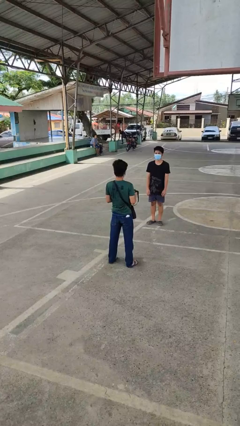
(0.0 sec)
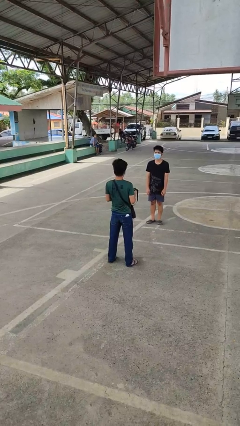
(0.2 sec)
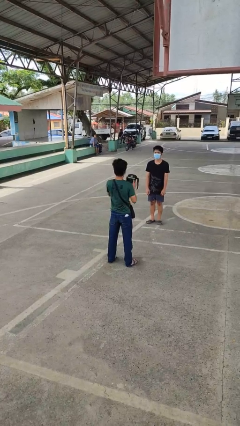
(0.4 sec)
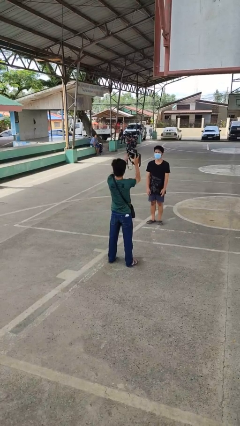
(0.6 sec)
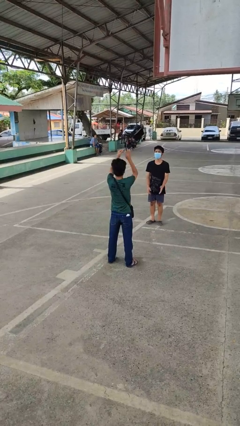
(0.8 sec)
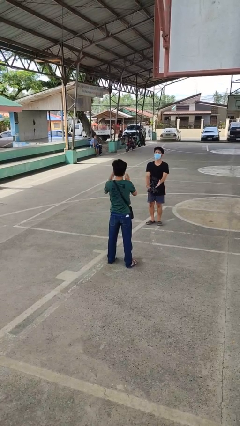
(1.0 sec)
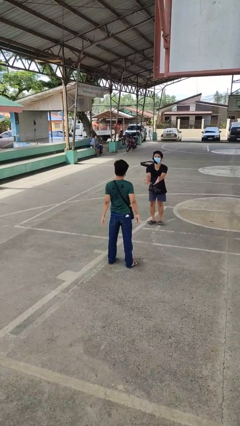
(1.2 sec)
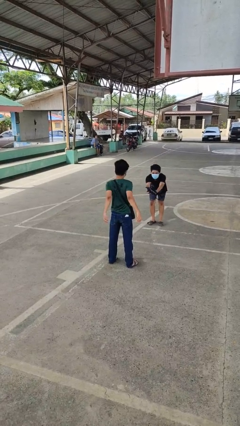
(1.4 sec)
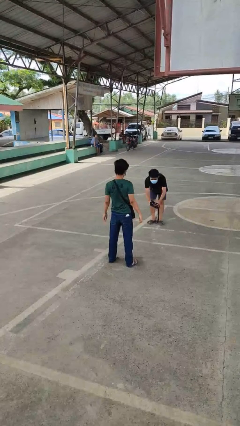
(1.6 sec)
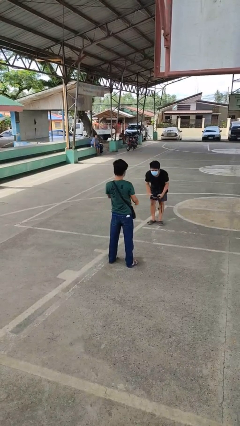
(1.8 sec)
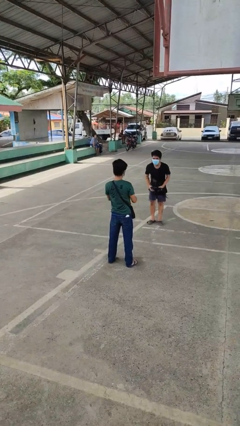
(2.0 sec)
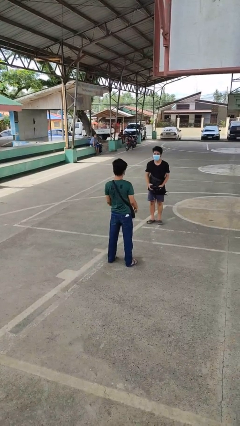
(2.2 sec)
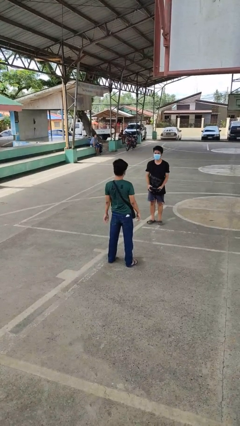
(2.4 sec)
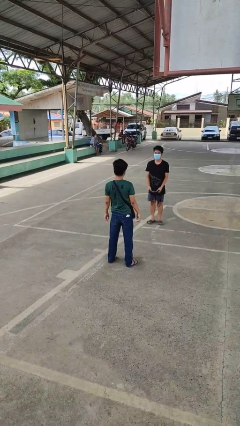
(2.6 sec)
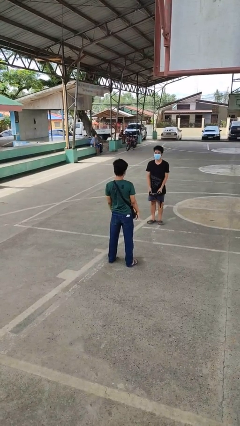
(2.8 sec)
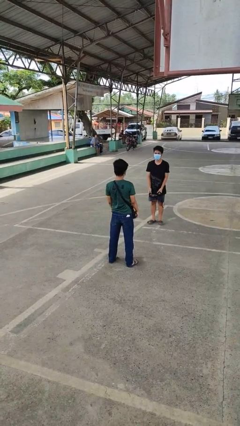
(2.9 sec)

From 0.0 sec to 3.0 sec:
person throws object to person

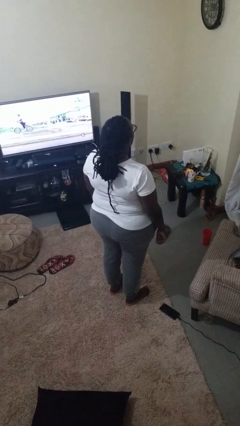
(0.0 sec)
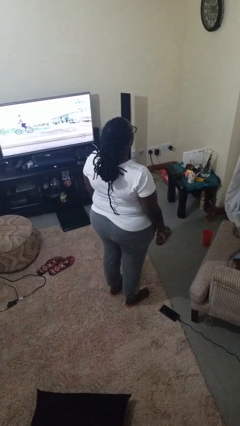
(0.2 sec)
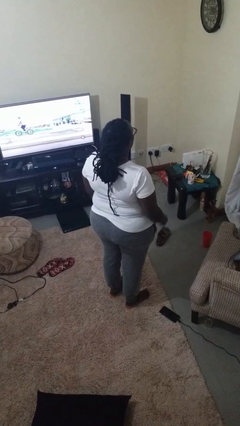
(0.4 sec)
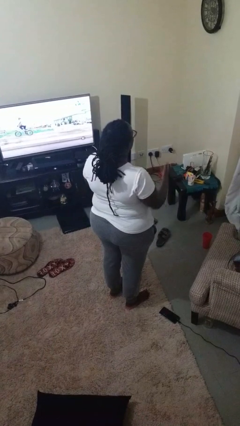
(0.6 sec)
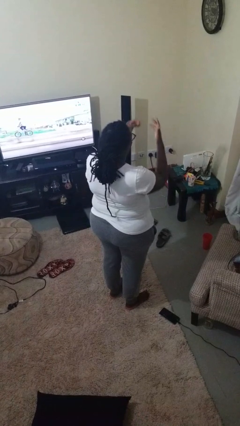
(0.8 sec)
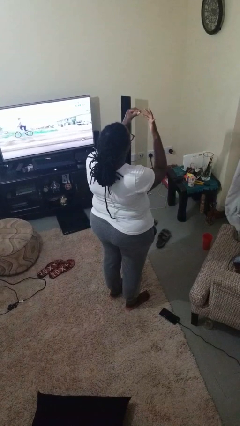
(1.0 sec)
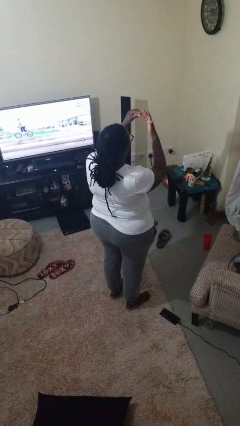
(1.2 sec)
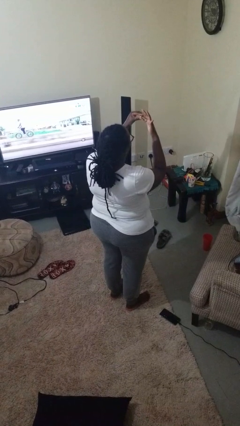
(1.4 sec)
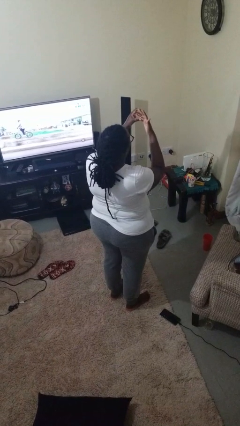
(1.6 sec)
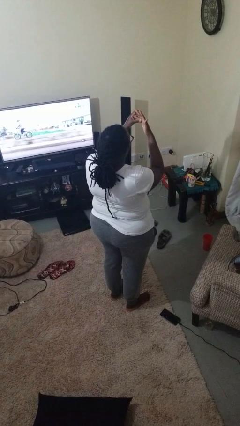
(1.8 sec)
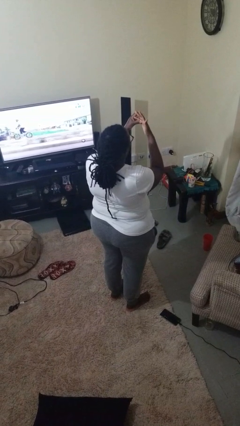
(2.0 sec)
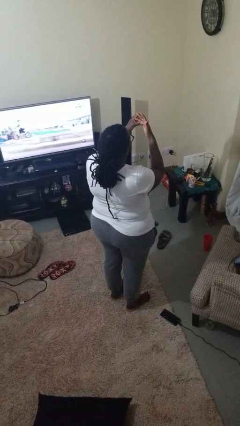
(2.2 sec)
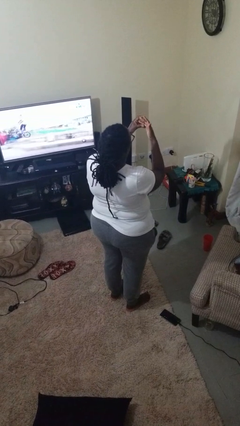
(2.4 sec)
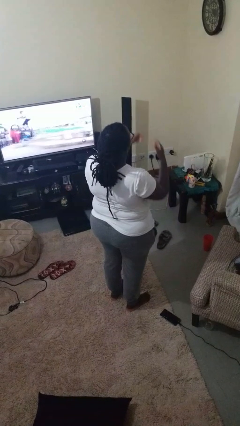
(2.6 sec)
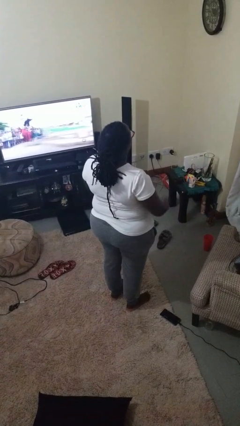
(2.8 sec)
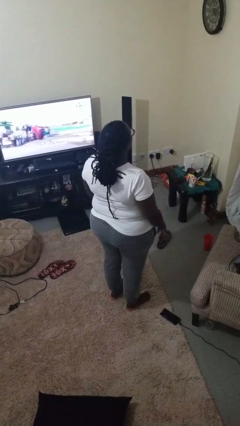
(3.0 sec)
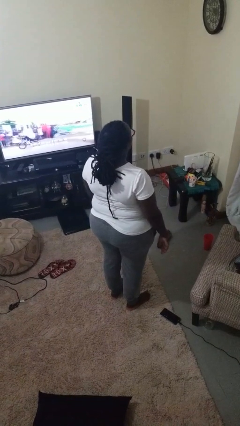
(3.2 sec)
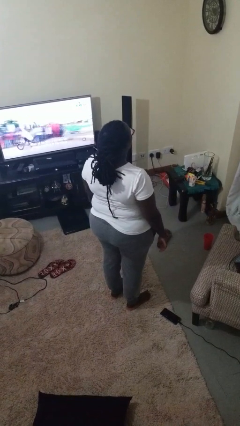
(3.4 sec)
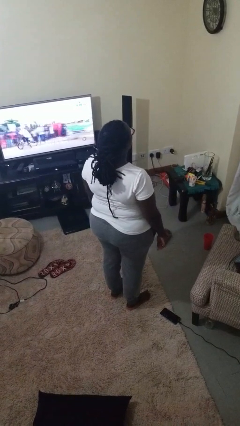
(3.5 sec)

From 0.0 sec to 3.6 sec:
person puts on ring

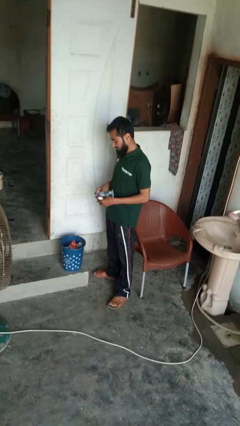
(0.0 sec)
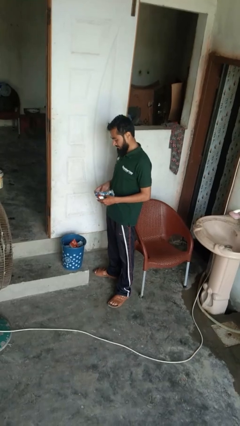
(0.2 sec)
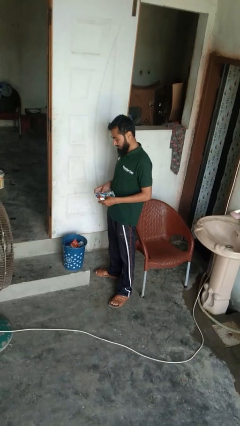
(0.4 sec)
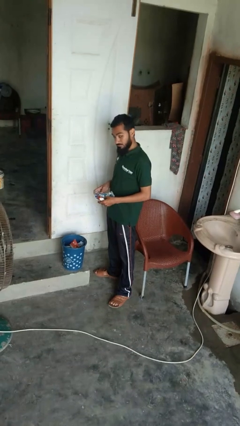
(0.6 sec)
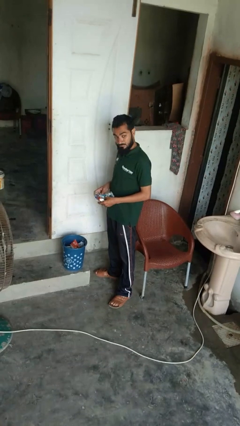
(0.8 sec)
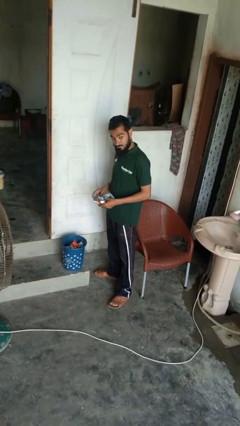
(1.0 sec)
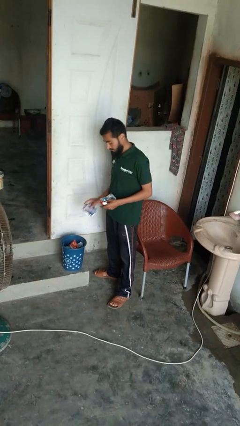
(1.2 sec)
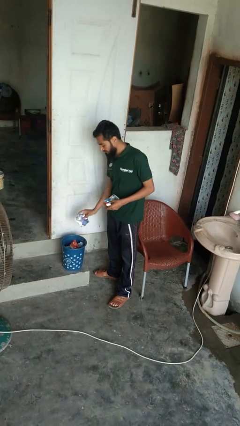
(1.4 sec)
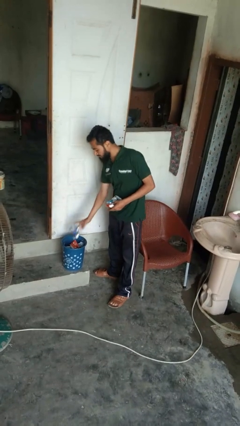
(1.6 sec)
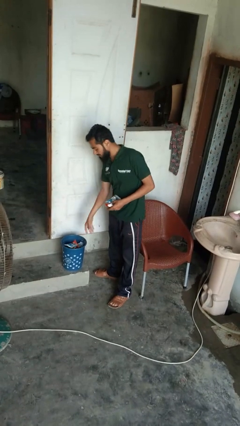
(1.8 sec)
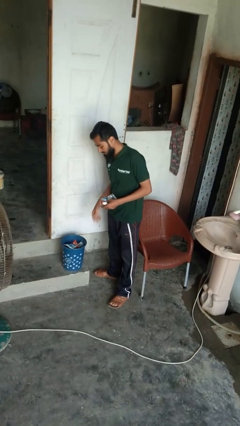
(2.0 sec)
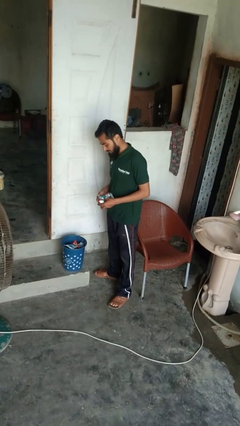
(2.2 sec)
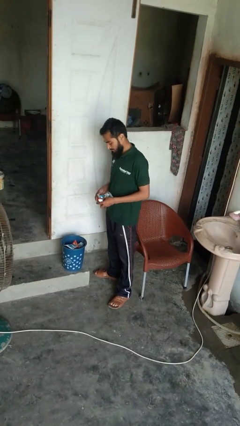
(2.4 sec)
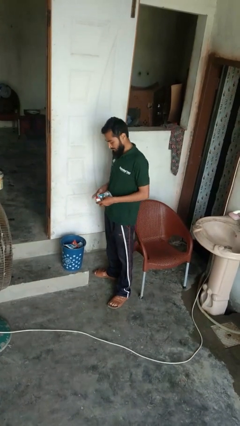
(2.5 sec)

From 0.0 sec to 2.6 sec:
person discards trash

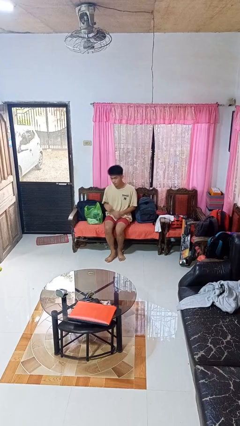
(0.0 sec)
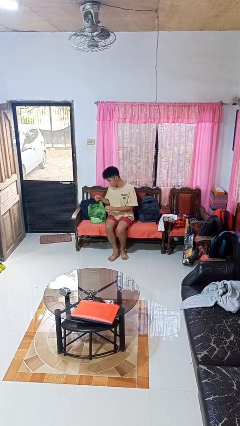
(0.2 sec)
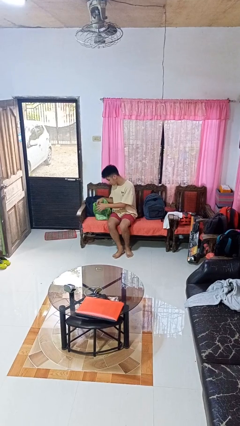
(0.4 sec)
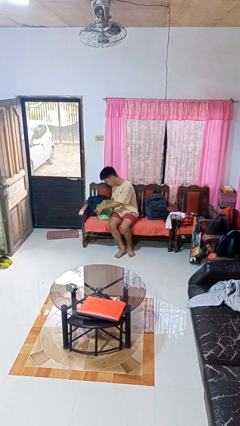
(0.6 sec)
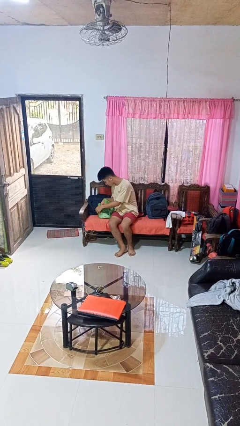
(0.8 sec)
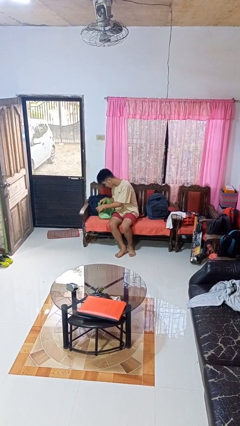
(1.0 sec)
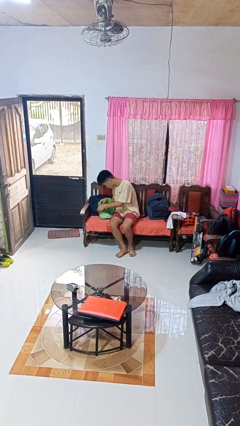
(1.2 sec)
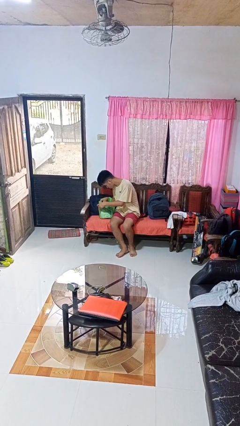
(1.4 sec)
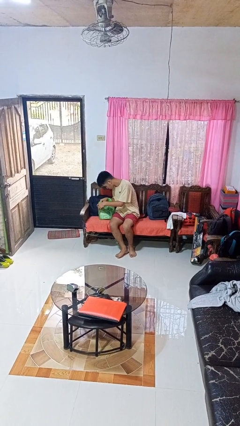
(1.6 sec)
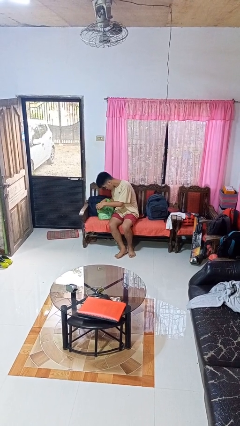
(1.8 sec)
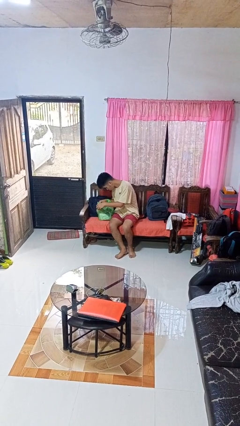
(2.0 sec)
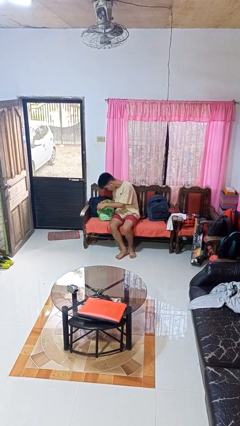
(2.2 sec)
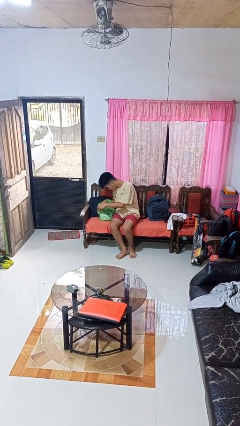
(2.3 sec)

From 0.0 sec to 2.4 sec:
person searches in bag

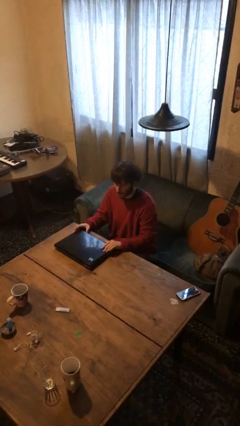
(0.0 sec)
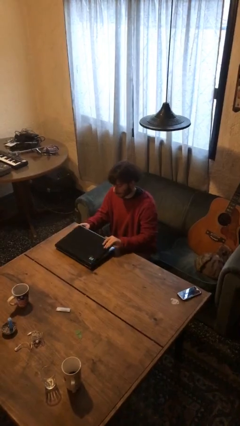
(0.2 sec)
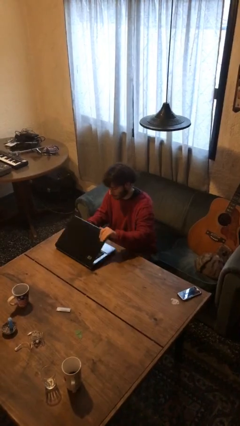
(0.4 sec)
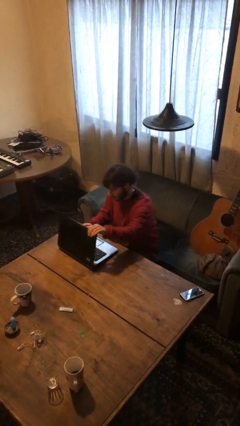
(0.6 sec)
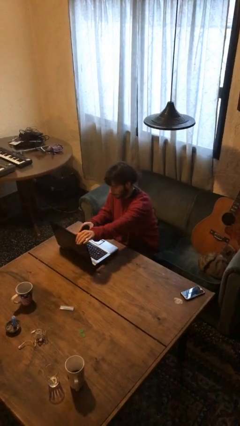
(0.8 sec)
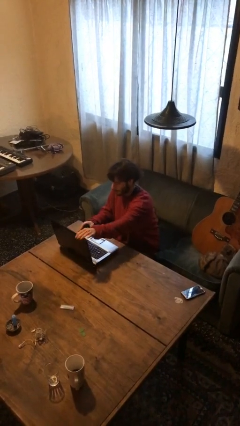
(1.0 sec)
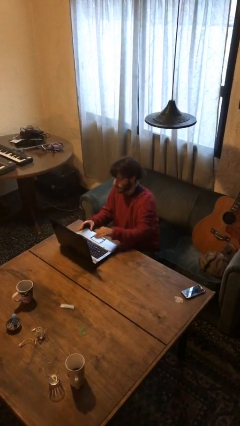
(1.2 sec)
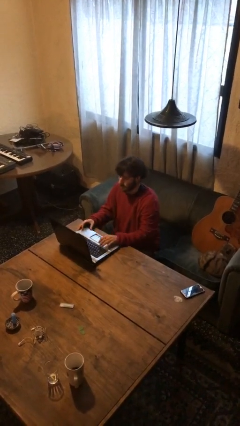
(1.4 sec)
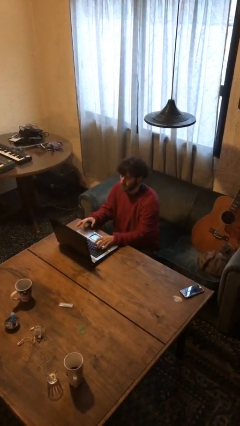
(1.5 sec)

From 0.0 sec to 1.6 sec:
person opens laptop

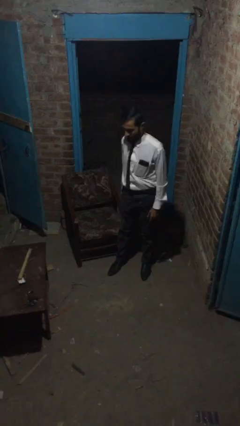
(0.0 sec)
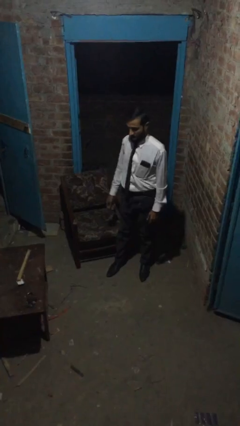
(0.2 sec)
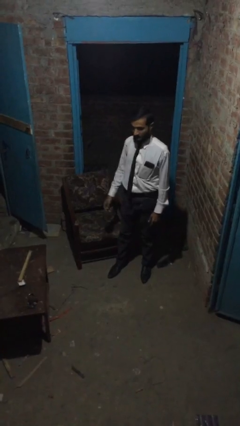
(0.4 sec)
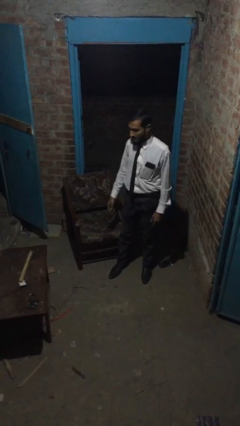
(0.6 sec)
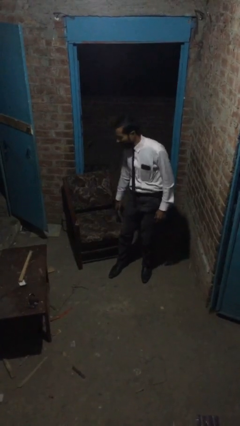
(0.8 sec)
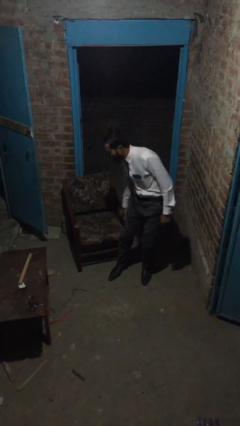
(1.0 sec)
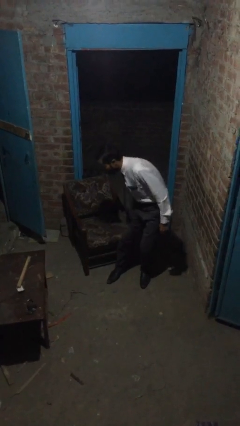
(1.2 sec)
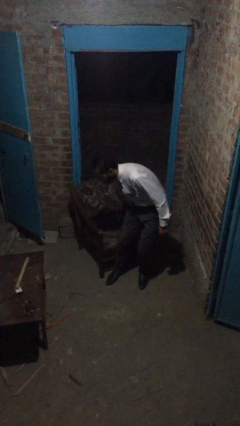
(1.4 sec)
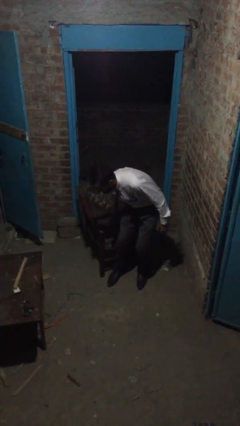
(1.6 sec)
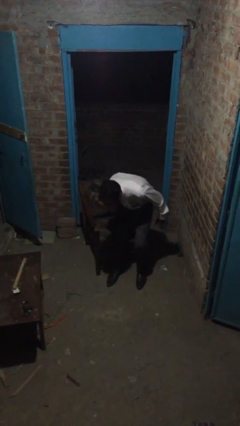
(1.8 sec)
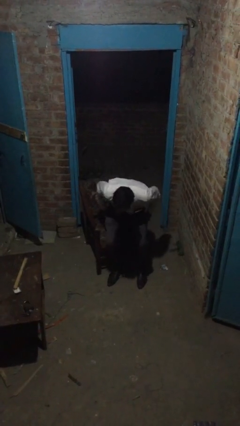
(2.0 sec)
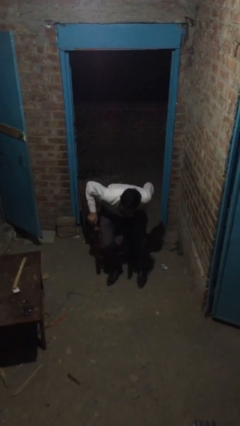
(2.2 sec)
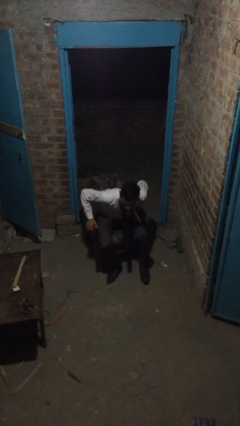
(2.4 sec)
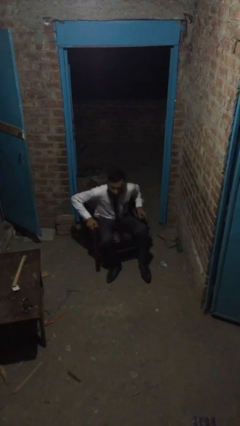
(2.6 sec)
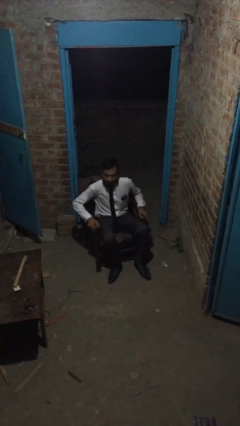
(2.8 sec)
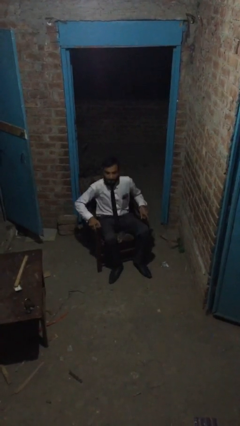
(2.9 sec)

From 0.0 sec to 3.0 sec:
person sits down

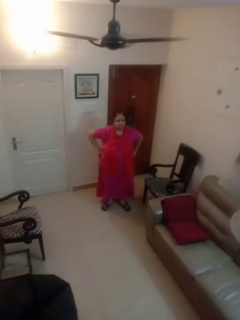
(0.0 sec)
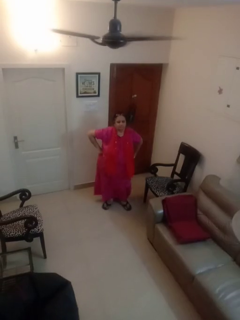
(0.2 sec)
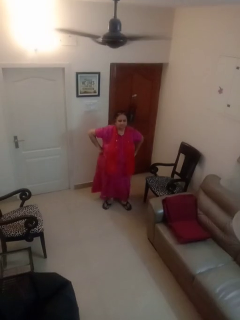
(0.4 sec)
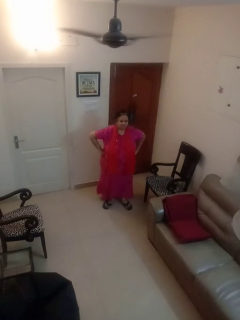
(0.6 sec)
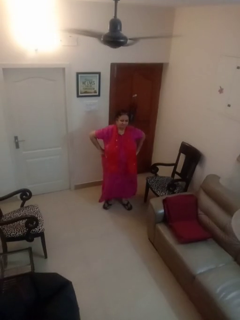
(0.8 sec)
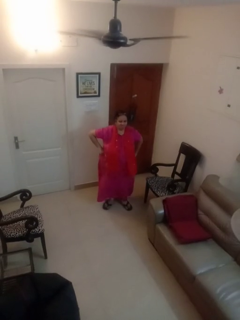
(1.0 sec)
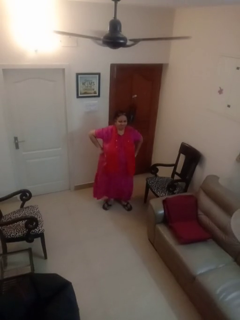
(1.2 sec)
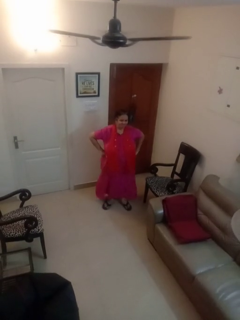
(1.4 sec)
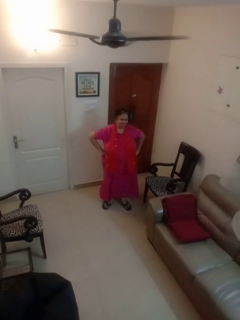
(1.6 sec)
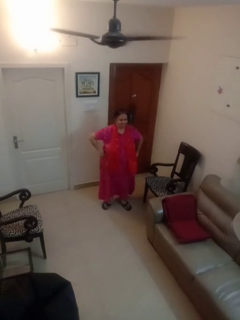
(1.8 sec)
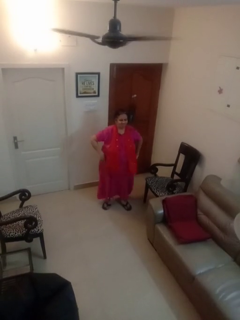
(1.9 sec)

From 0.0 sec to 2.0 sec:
person wiggles hips
